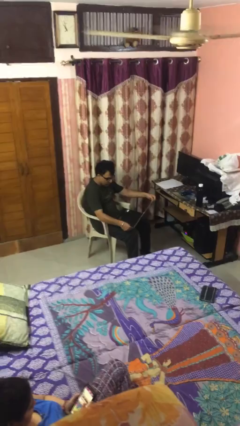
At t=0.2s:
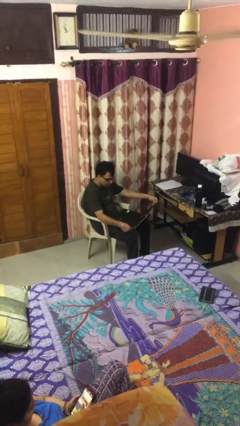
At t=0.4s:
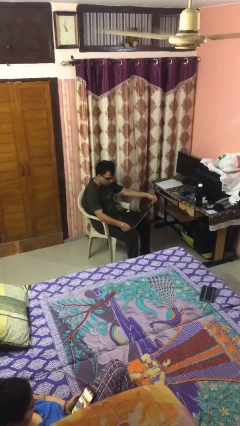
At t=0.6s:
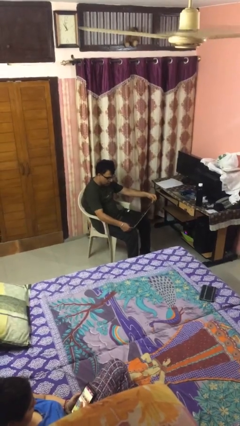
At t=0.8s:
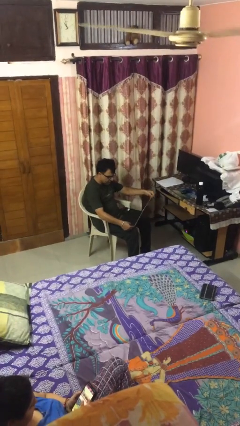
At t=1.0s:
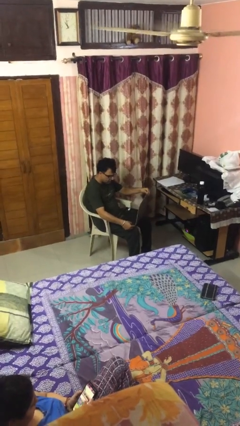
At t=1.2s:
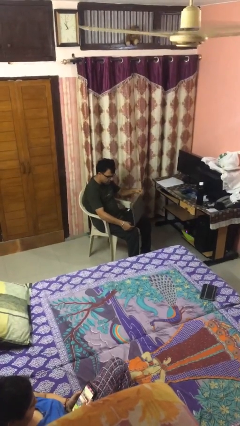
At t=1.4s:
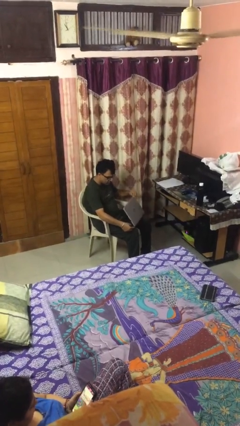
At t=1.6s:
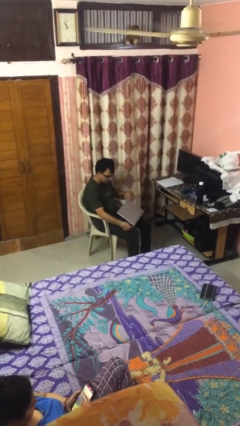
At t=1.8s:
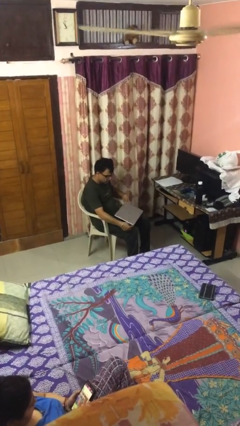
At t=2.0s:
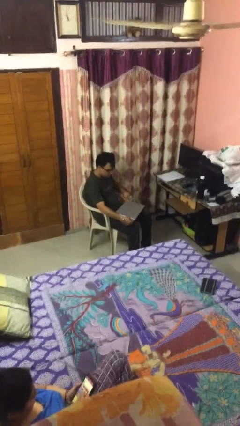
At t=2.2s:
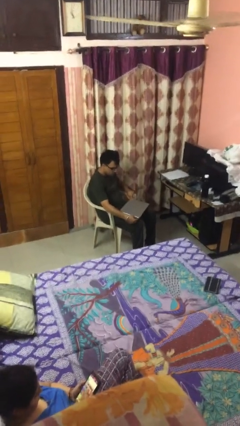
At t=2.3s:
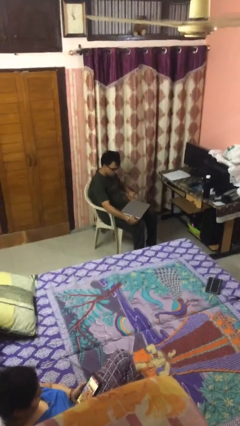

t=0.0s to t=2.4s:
person closes laptop

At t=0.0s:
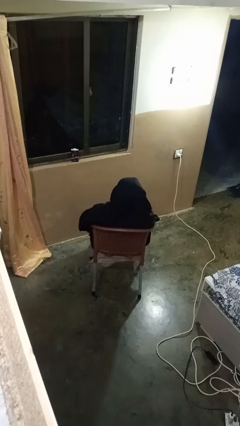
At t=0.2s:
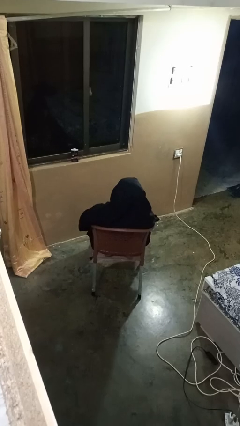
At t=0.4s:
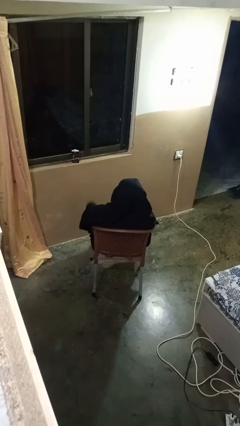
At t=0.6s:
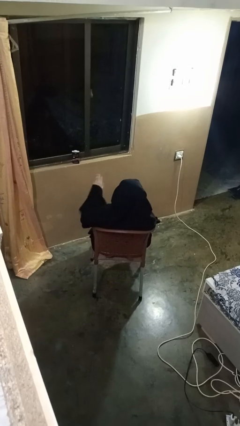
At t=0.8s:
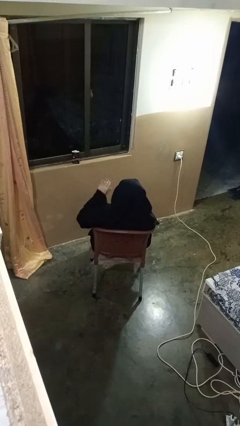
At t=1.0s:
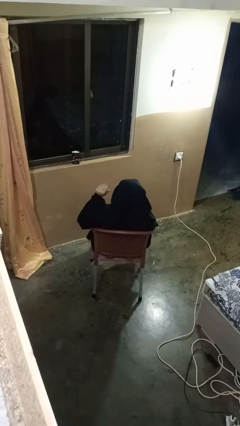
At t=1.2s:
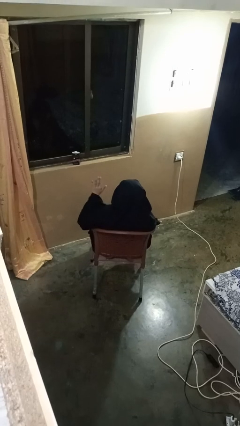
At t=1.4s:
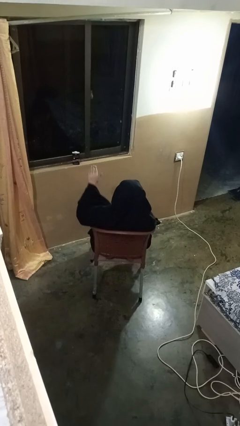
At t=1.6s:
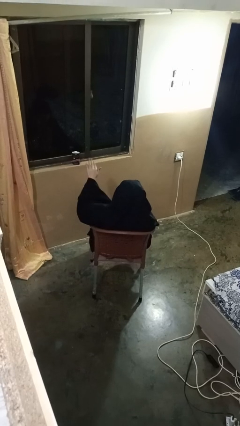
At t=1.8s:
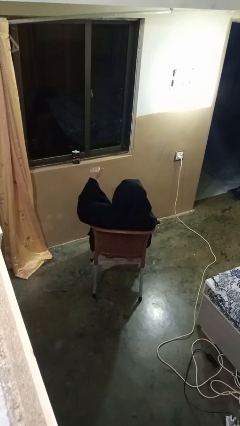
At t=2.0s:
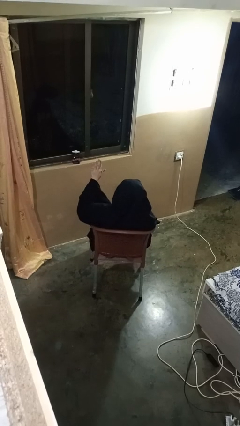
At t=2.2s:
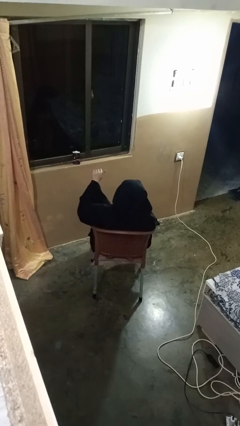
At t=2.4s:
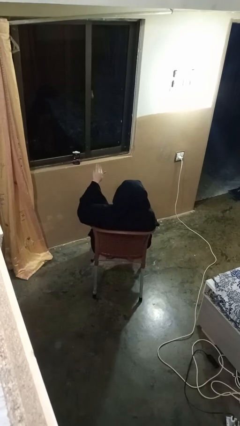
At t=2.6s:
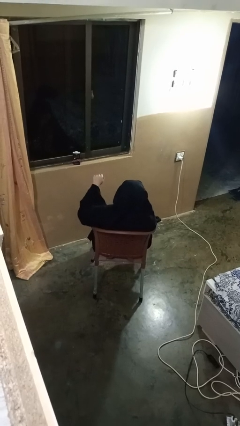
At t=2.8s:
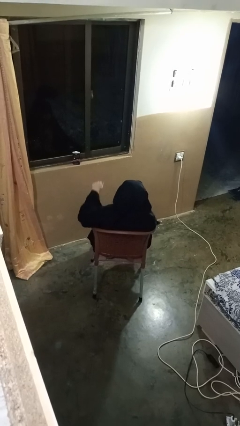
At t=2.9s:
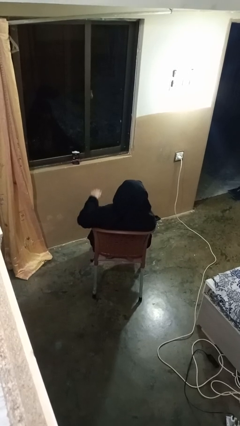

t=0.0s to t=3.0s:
person gestures come here

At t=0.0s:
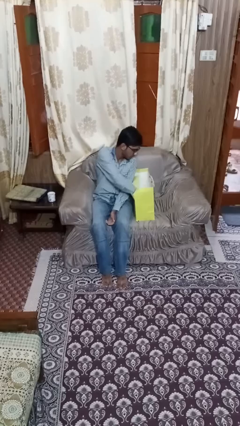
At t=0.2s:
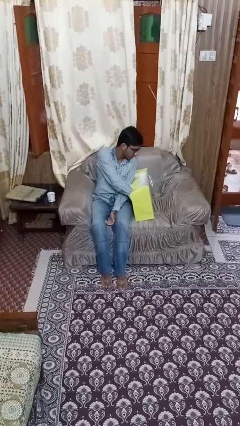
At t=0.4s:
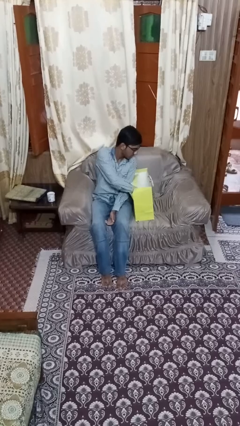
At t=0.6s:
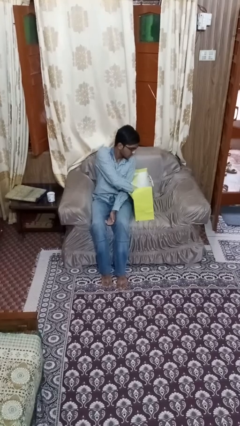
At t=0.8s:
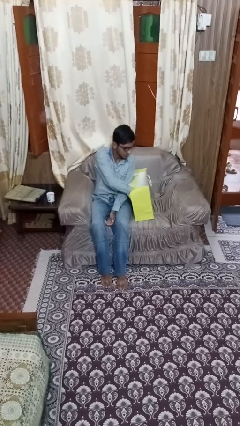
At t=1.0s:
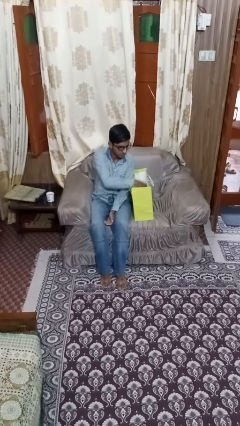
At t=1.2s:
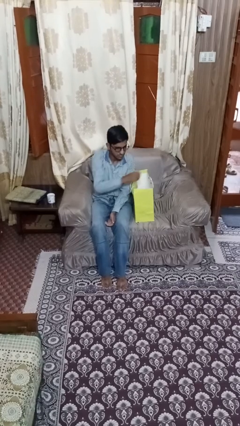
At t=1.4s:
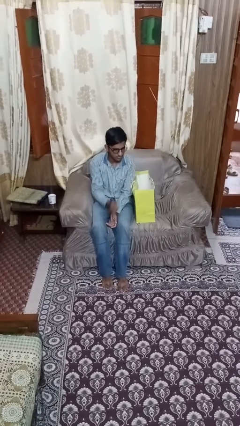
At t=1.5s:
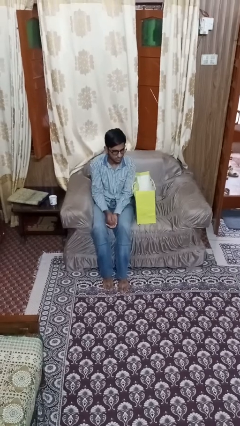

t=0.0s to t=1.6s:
person searches in bag

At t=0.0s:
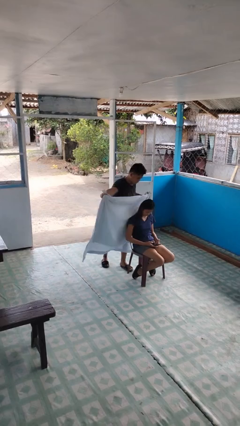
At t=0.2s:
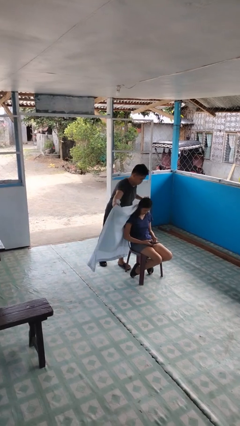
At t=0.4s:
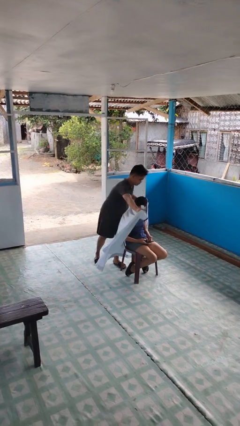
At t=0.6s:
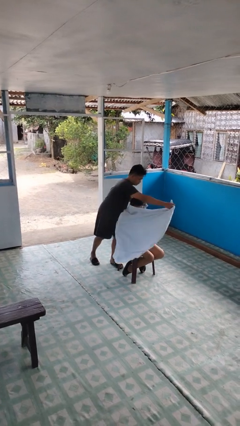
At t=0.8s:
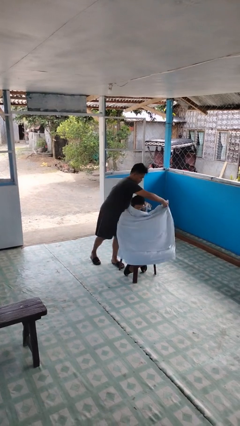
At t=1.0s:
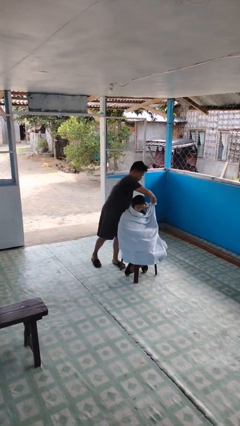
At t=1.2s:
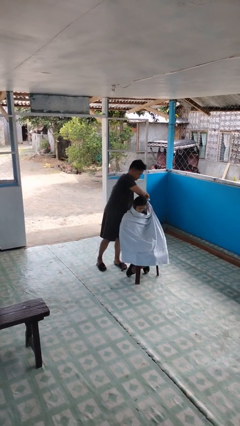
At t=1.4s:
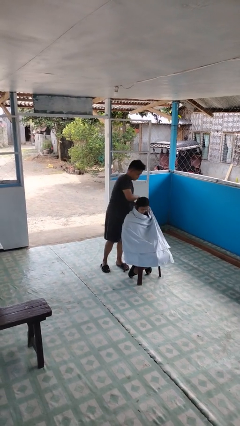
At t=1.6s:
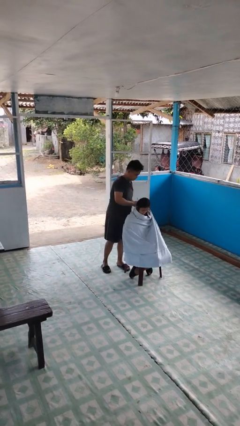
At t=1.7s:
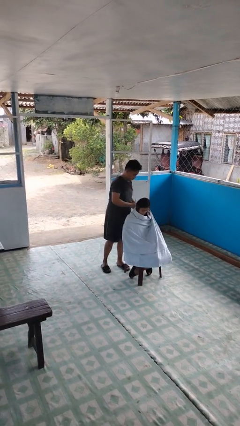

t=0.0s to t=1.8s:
person covers friend with blanket

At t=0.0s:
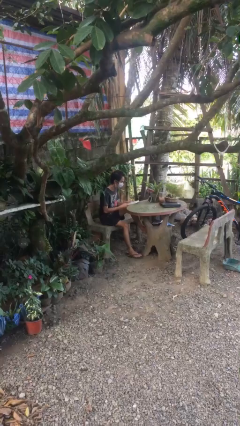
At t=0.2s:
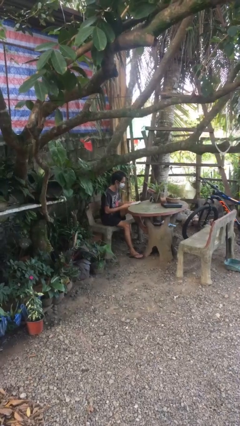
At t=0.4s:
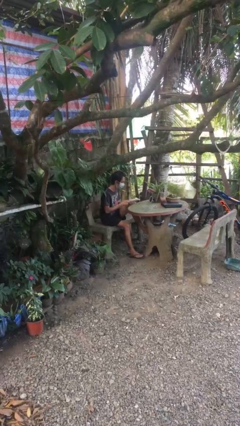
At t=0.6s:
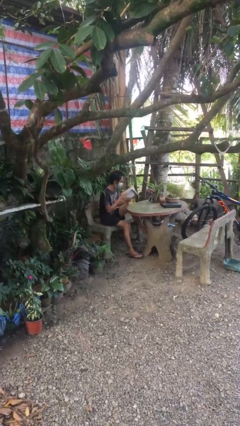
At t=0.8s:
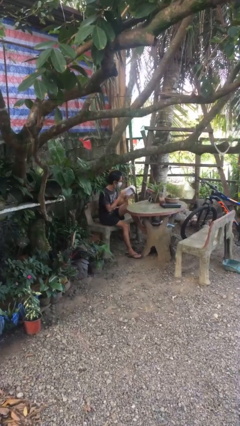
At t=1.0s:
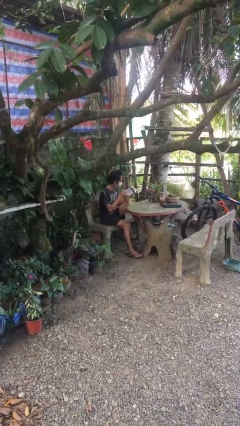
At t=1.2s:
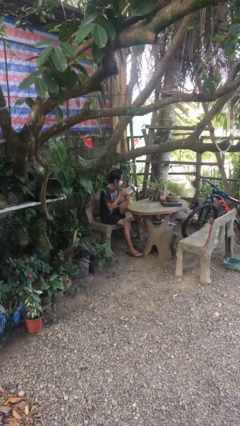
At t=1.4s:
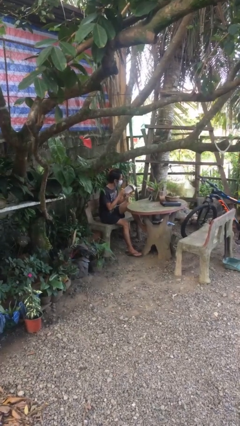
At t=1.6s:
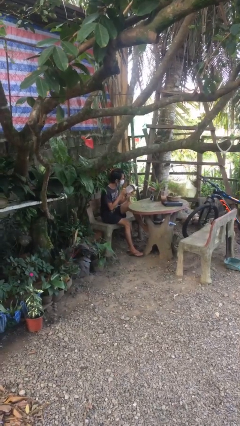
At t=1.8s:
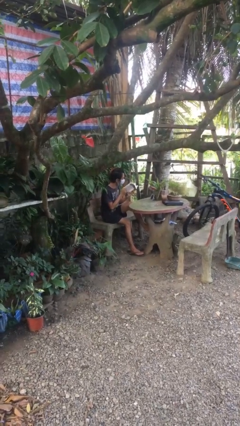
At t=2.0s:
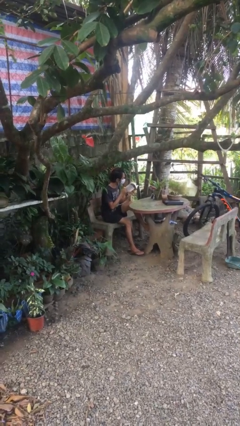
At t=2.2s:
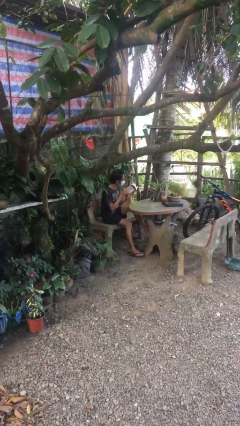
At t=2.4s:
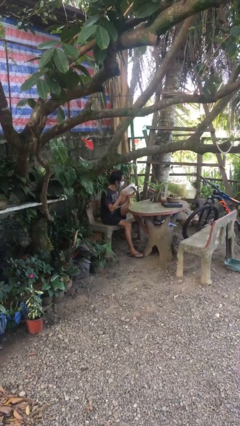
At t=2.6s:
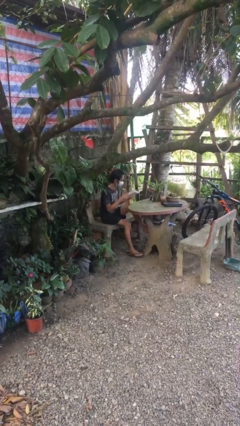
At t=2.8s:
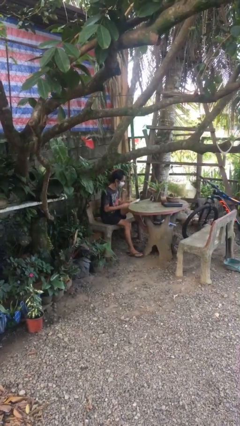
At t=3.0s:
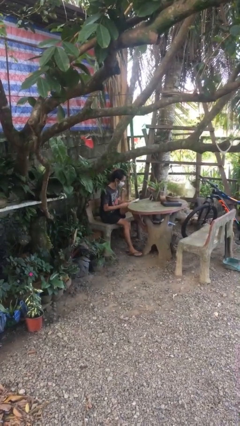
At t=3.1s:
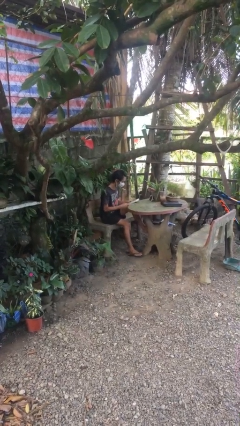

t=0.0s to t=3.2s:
person reads document

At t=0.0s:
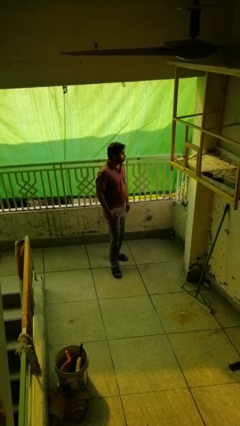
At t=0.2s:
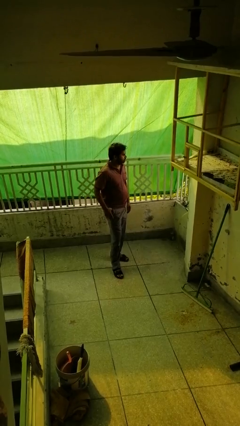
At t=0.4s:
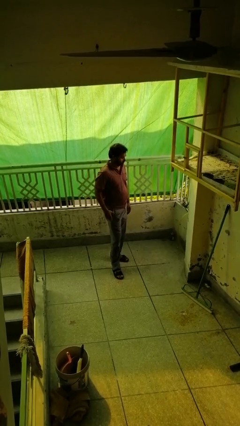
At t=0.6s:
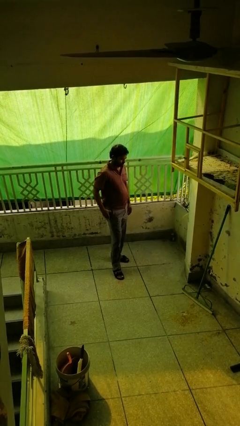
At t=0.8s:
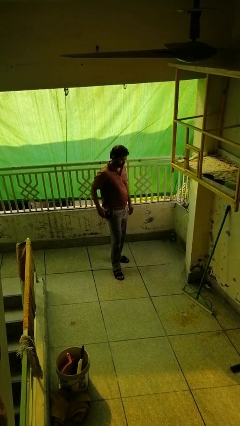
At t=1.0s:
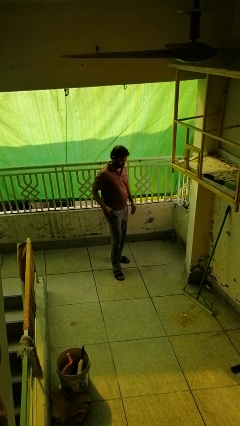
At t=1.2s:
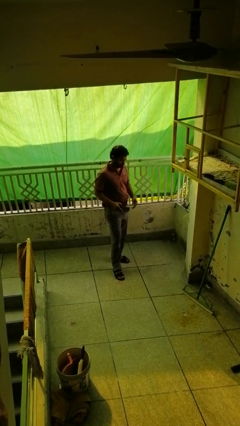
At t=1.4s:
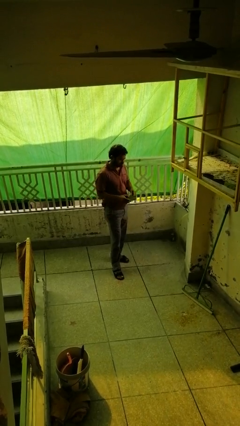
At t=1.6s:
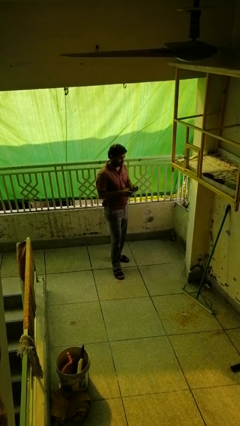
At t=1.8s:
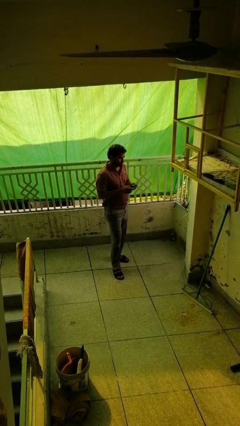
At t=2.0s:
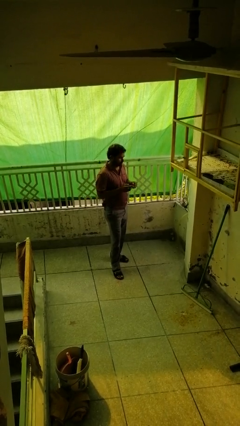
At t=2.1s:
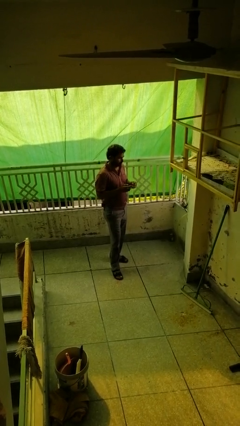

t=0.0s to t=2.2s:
person takes phone from pocket

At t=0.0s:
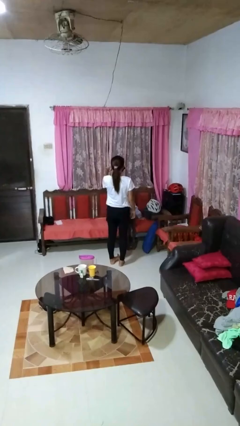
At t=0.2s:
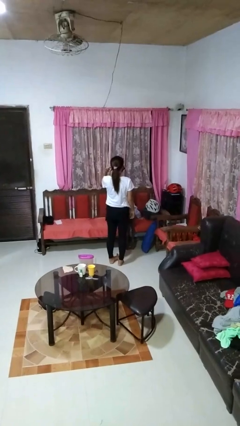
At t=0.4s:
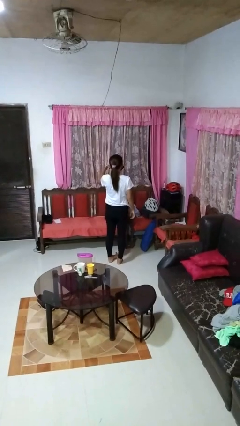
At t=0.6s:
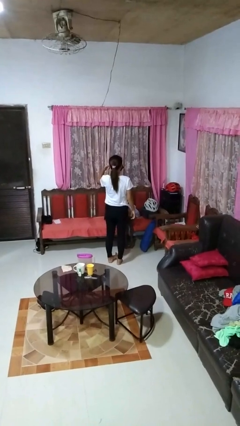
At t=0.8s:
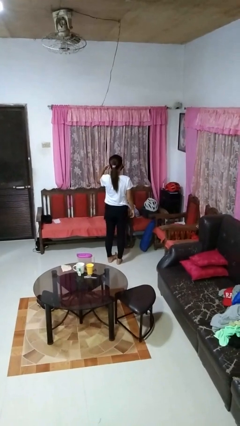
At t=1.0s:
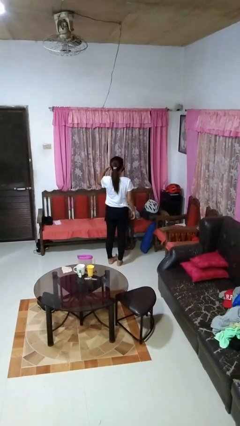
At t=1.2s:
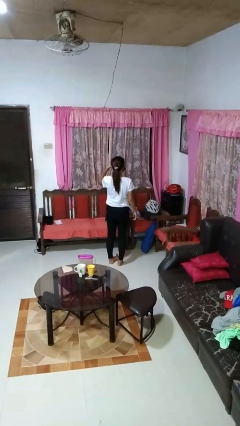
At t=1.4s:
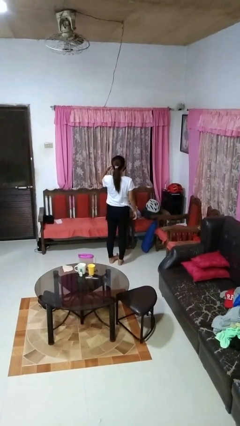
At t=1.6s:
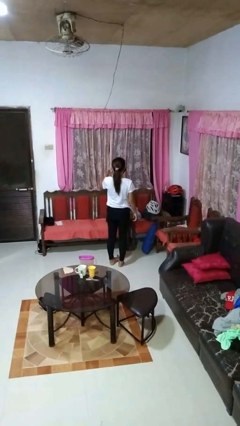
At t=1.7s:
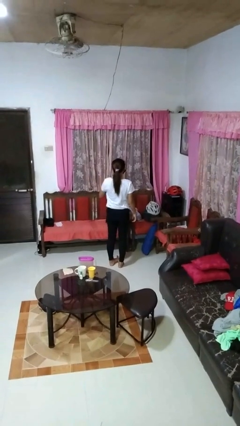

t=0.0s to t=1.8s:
person gestures listen closely

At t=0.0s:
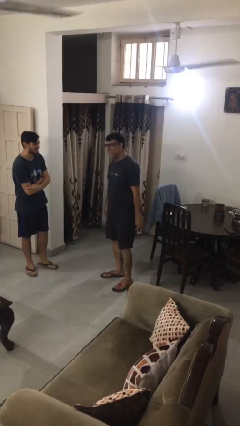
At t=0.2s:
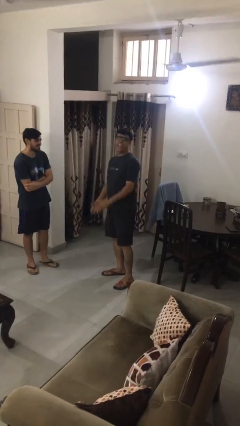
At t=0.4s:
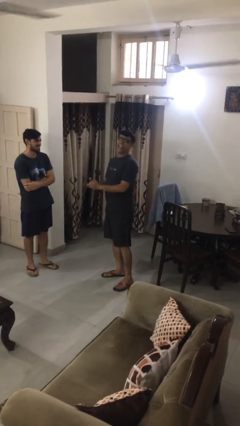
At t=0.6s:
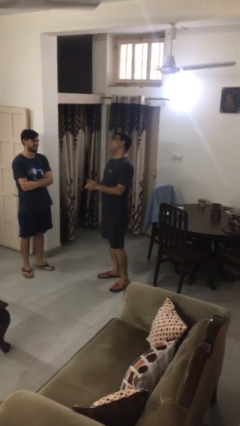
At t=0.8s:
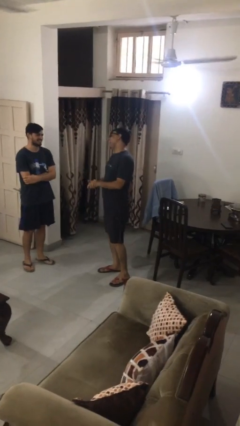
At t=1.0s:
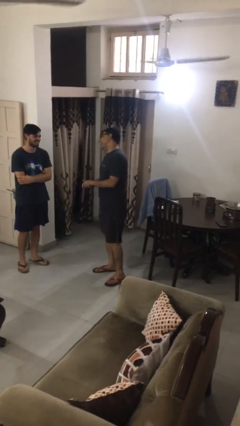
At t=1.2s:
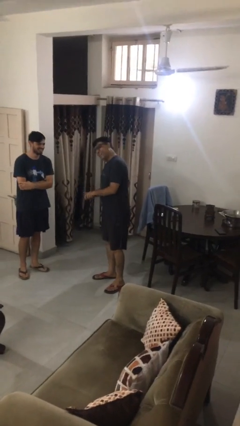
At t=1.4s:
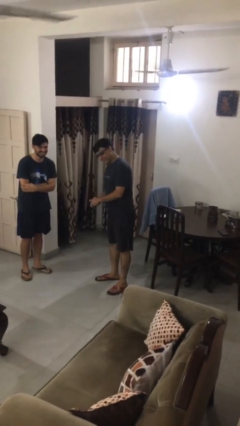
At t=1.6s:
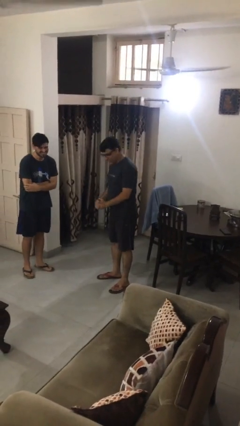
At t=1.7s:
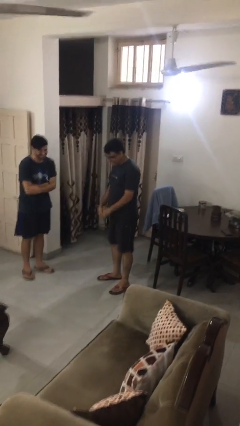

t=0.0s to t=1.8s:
person laughs with person
